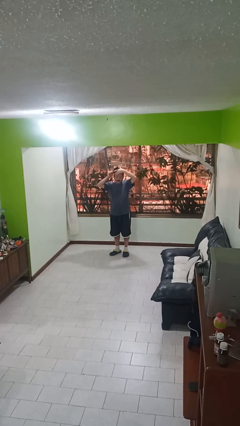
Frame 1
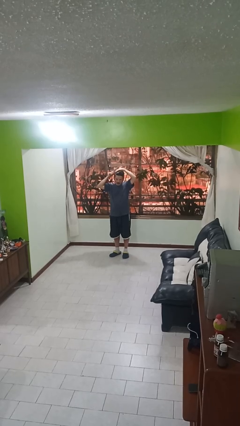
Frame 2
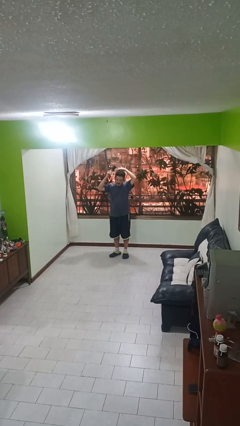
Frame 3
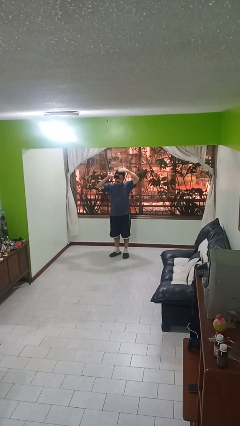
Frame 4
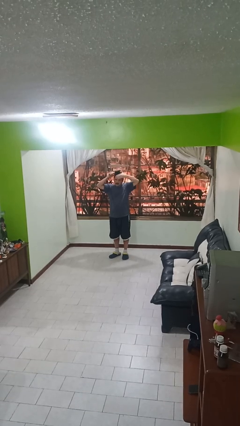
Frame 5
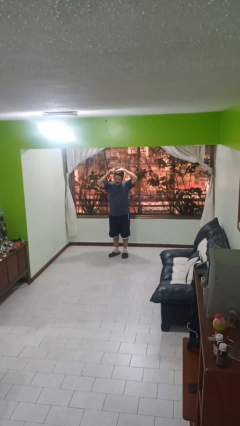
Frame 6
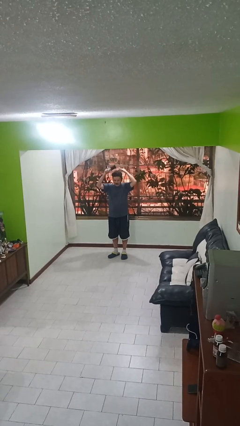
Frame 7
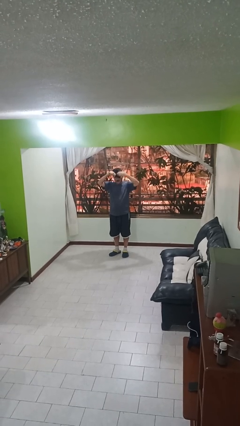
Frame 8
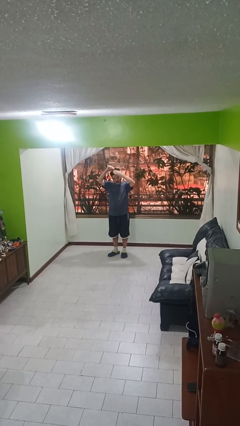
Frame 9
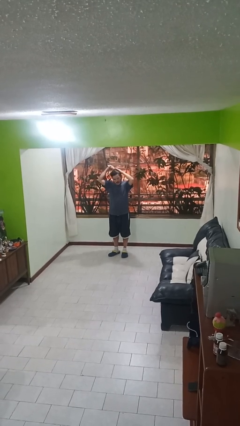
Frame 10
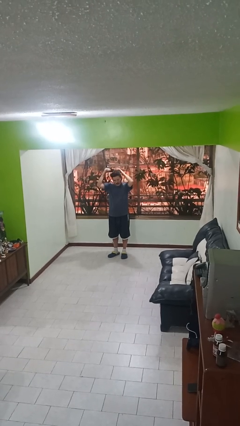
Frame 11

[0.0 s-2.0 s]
person brushes hair

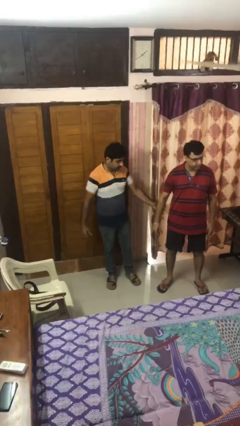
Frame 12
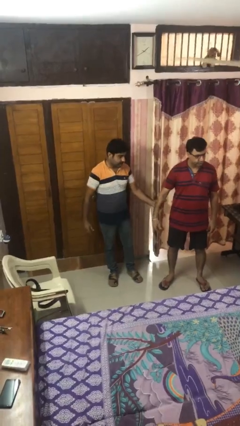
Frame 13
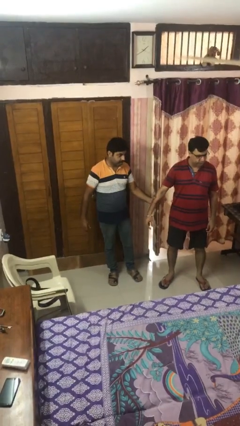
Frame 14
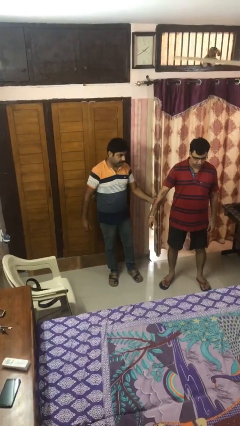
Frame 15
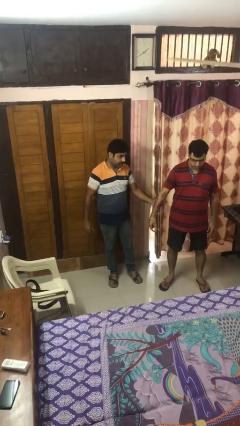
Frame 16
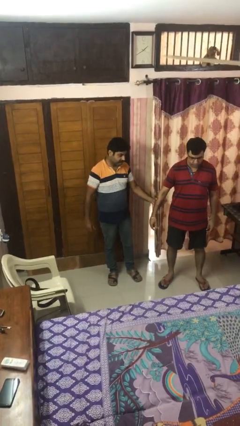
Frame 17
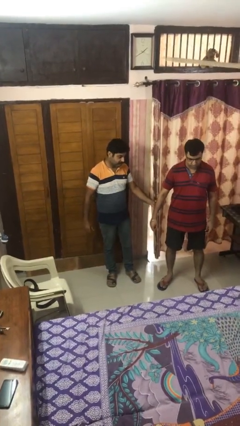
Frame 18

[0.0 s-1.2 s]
person grabs person by forearm

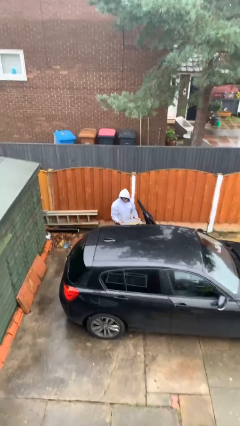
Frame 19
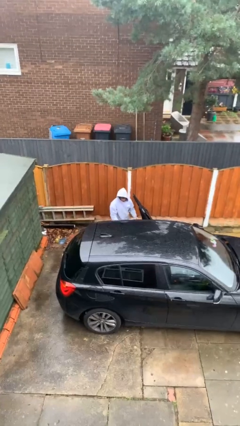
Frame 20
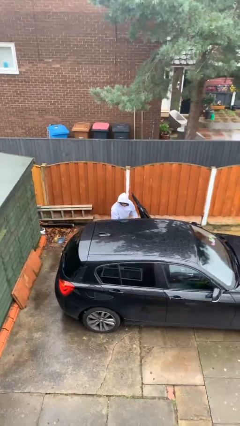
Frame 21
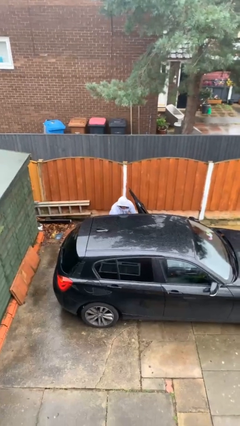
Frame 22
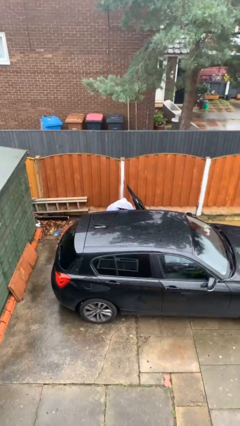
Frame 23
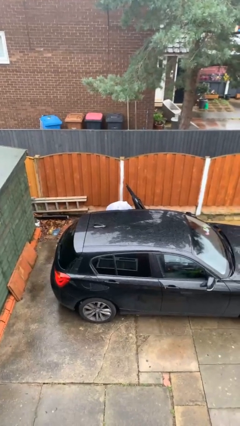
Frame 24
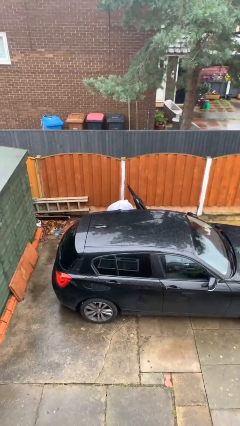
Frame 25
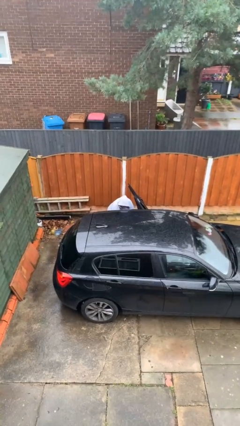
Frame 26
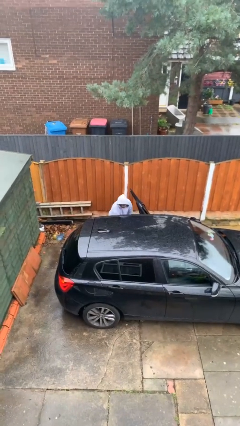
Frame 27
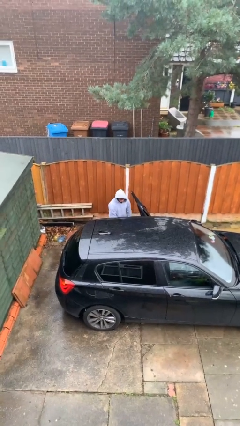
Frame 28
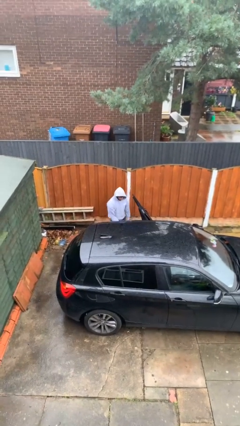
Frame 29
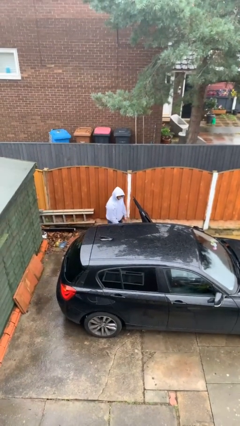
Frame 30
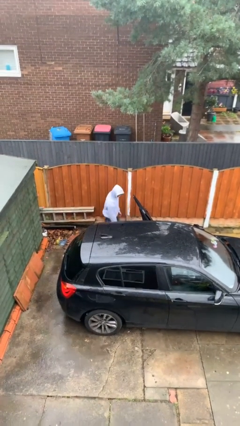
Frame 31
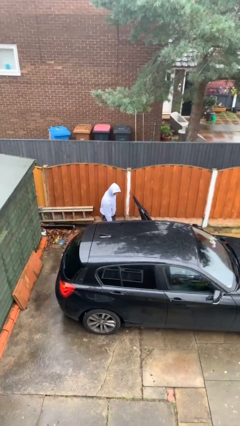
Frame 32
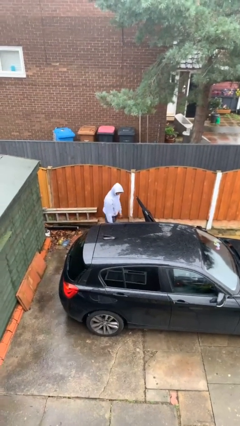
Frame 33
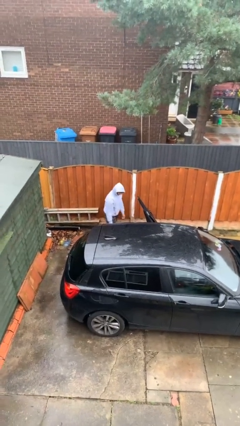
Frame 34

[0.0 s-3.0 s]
person loads car

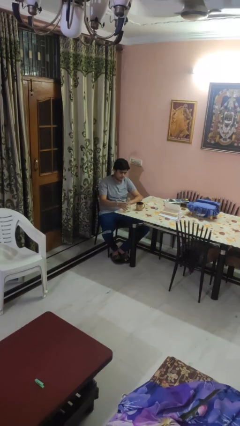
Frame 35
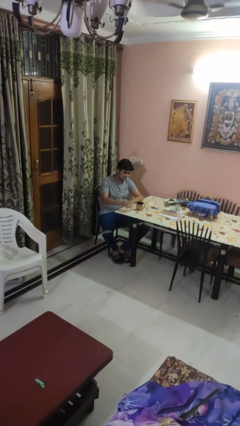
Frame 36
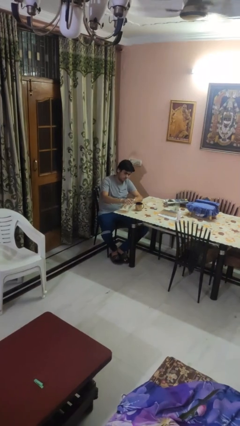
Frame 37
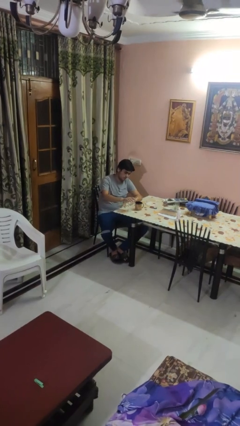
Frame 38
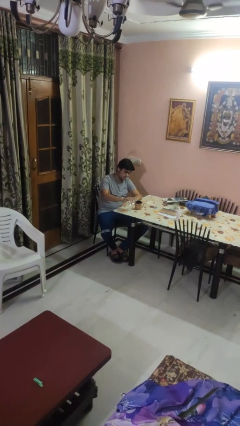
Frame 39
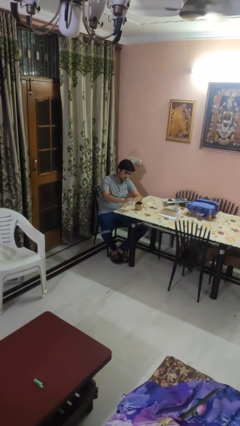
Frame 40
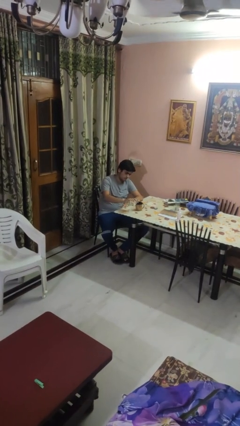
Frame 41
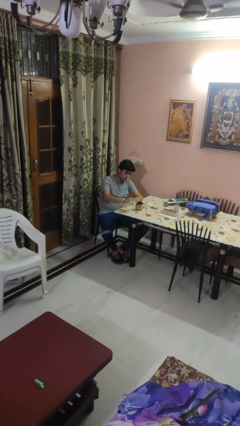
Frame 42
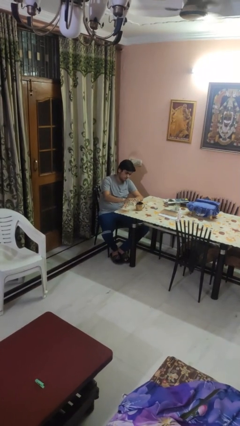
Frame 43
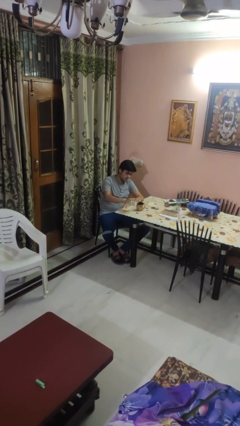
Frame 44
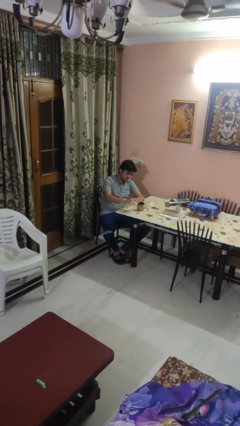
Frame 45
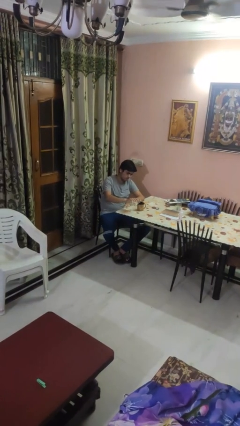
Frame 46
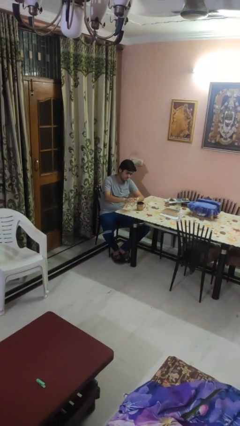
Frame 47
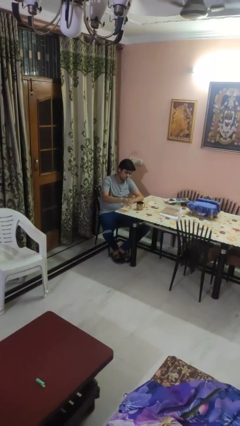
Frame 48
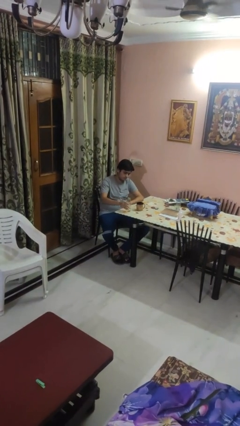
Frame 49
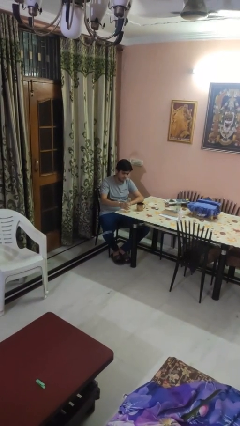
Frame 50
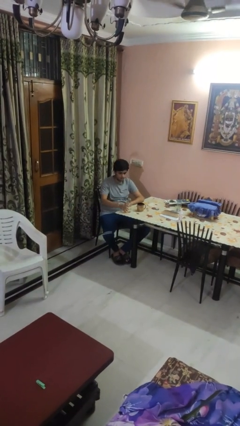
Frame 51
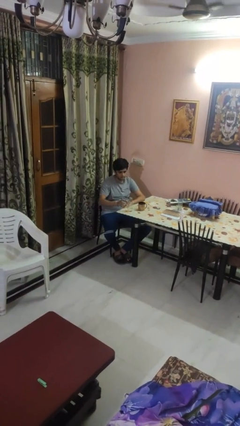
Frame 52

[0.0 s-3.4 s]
person pours liquid into cup

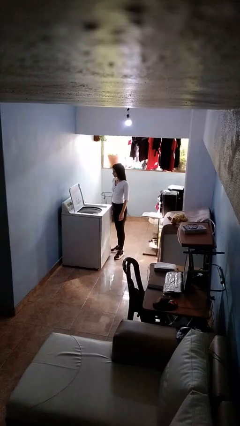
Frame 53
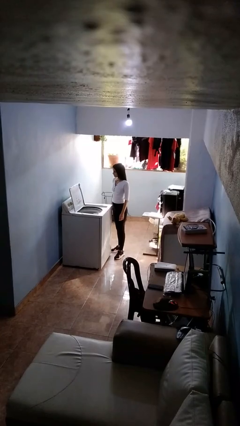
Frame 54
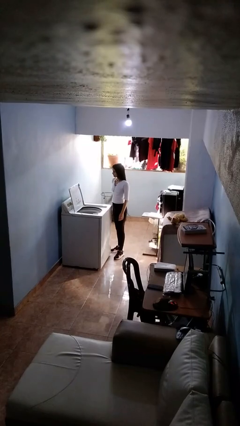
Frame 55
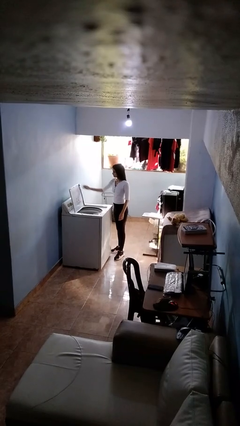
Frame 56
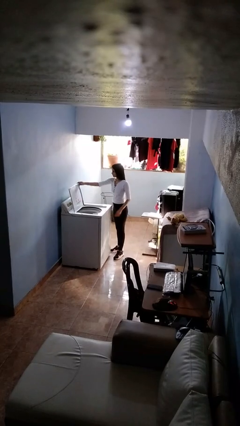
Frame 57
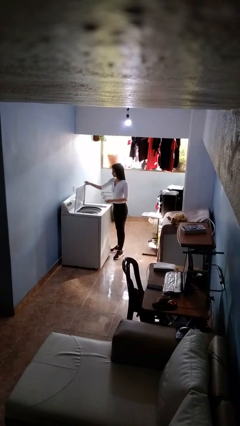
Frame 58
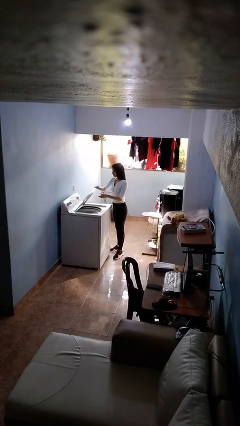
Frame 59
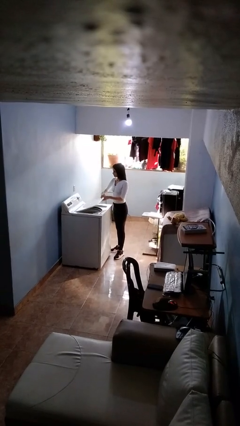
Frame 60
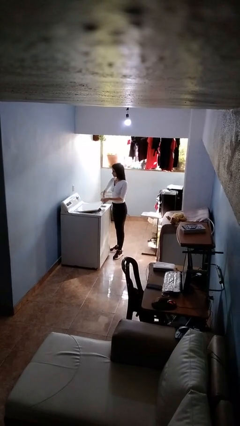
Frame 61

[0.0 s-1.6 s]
person closes clothes washer

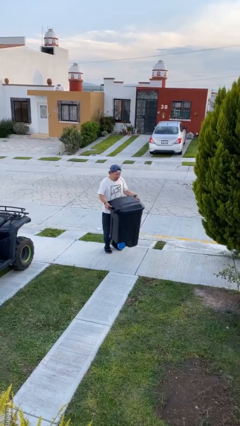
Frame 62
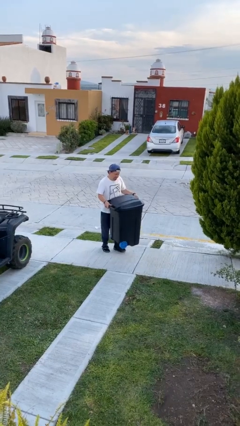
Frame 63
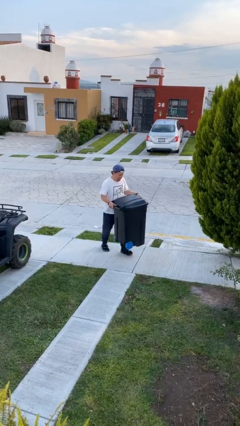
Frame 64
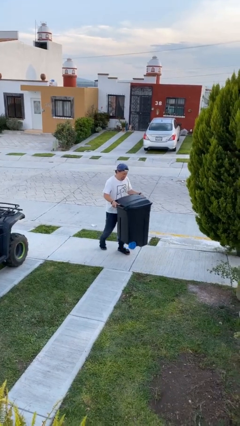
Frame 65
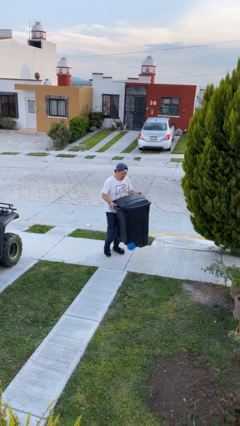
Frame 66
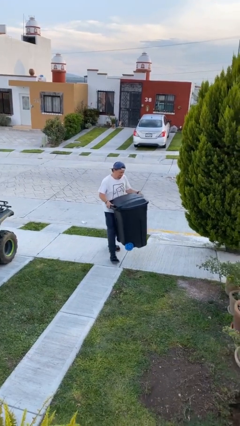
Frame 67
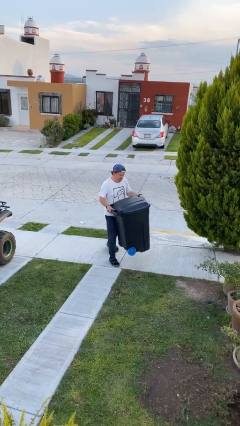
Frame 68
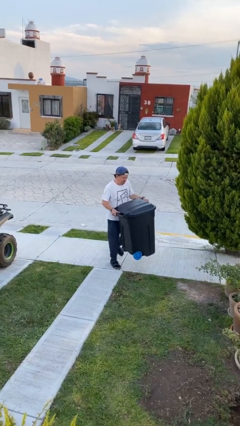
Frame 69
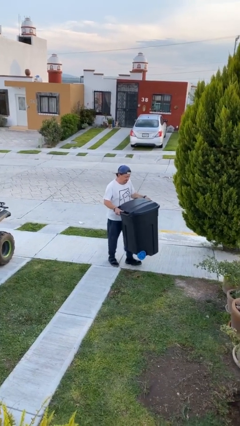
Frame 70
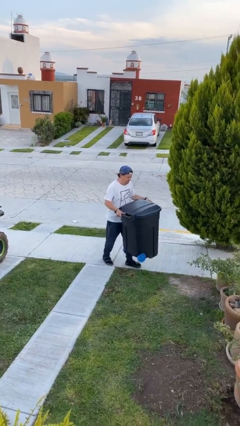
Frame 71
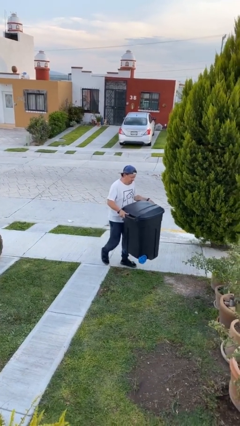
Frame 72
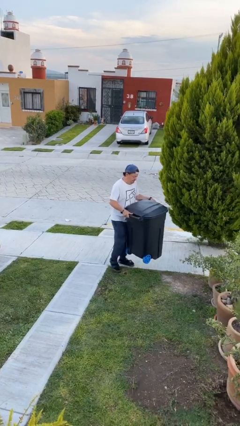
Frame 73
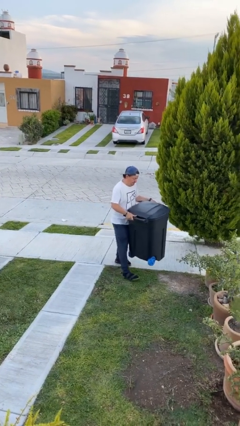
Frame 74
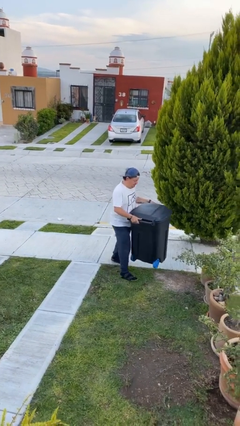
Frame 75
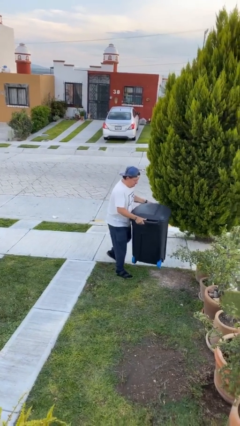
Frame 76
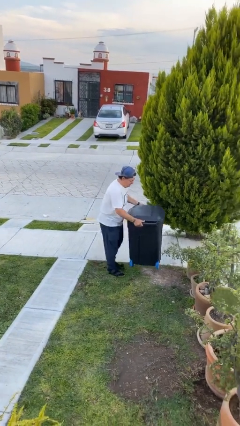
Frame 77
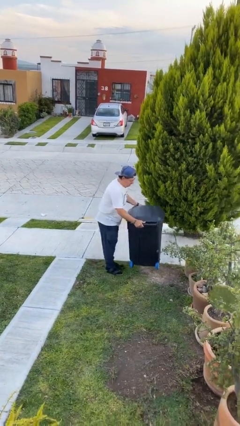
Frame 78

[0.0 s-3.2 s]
person carries heavy object

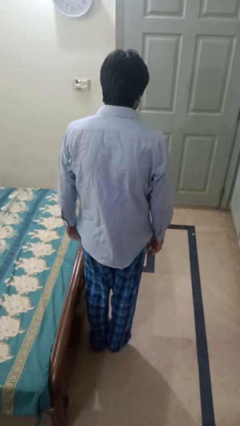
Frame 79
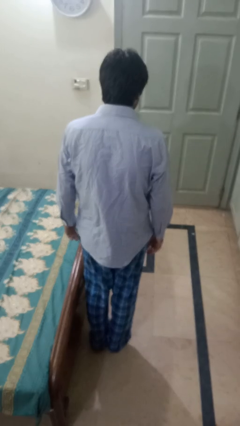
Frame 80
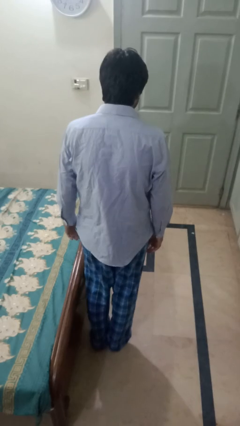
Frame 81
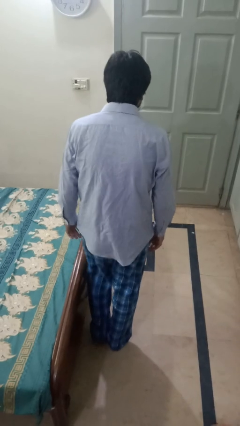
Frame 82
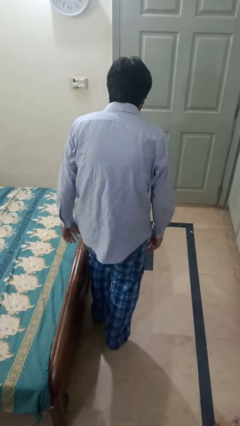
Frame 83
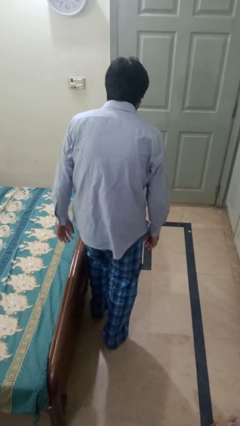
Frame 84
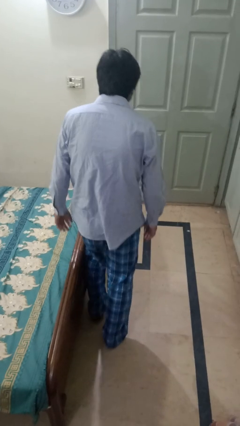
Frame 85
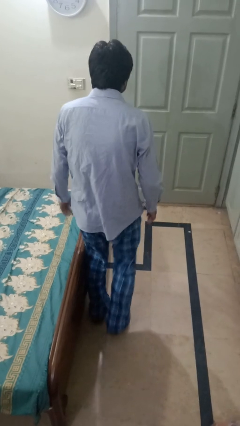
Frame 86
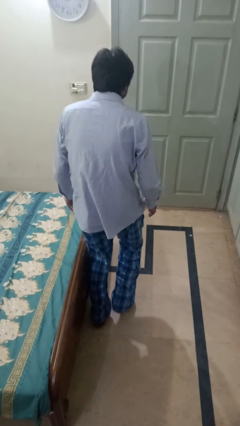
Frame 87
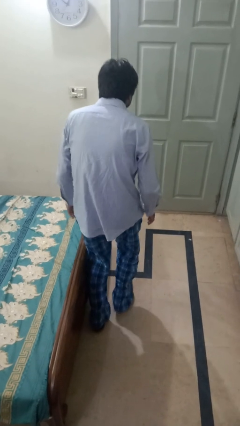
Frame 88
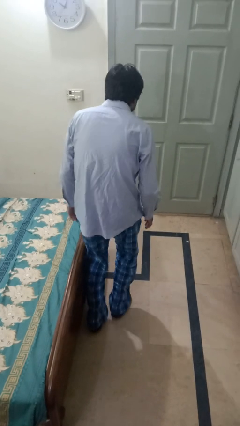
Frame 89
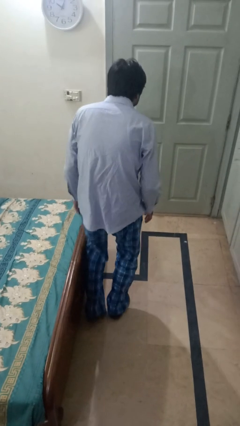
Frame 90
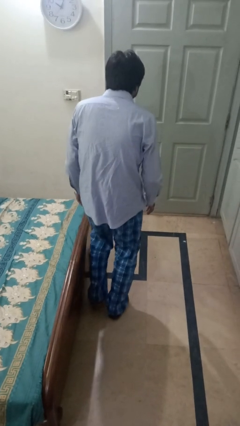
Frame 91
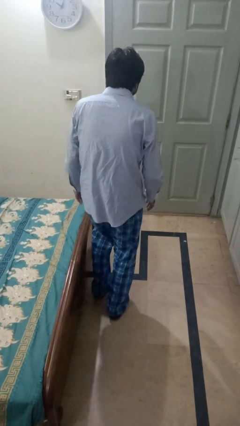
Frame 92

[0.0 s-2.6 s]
person walks tiptoe
